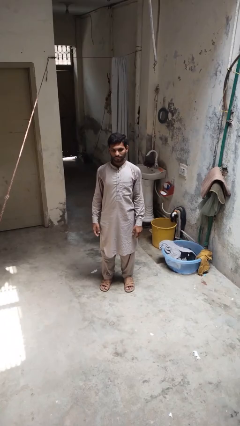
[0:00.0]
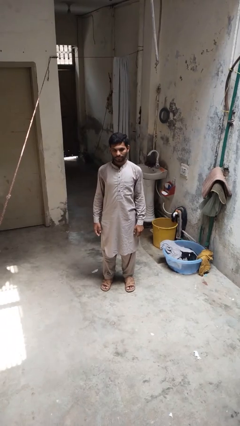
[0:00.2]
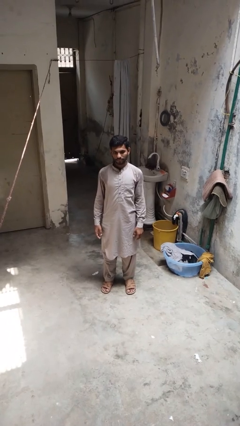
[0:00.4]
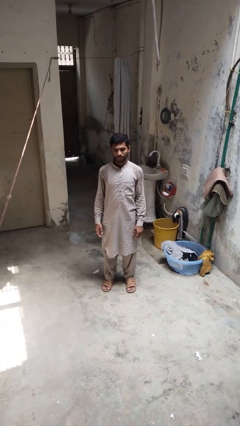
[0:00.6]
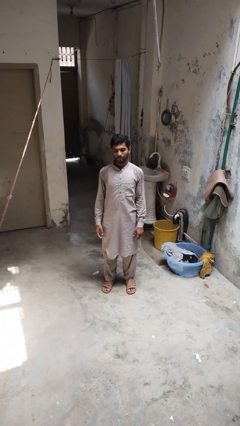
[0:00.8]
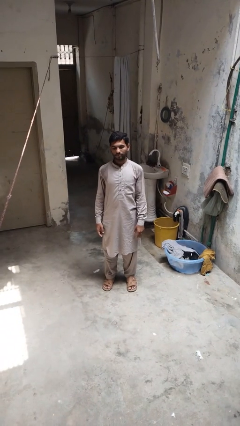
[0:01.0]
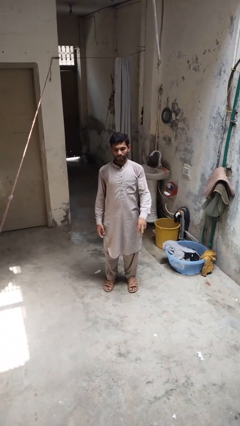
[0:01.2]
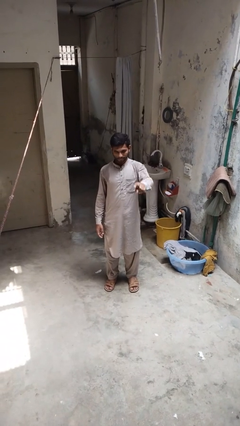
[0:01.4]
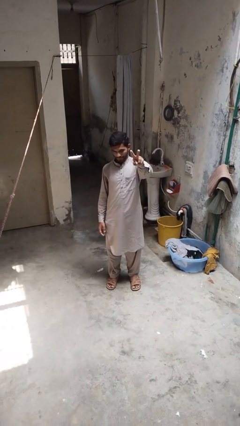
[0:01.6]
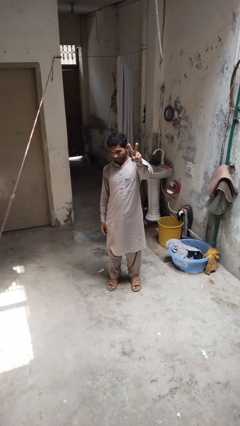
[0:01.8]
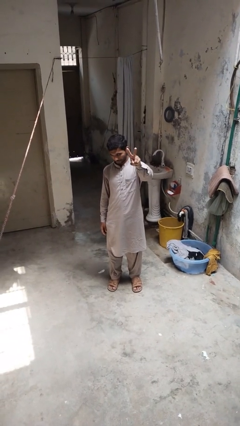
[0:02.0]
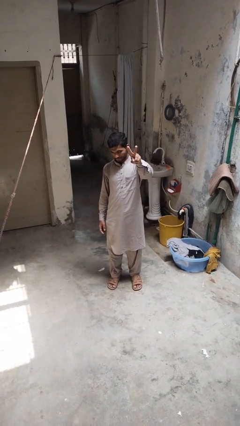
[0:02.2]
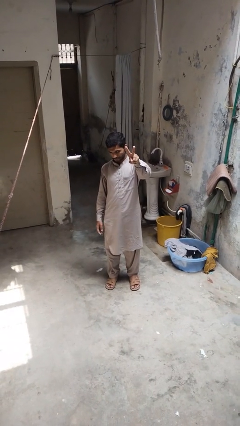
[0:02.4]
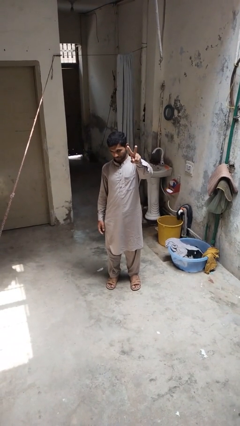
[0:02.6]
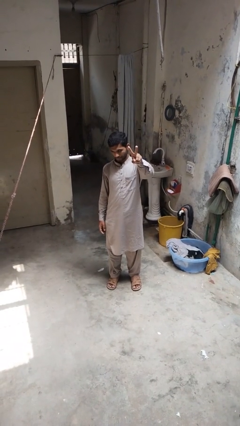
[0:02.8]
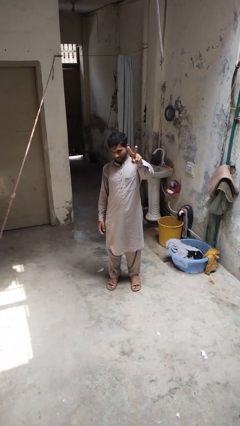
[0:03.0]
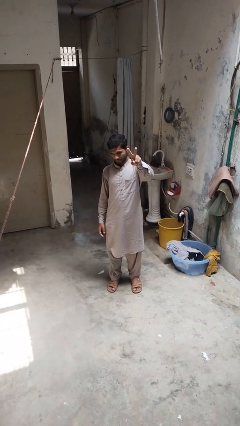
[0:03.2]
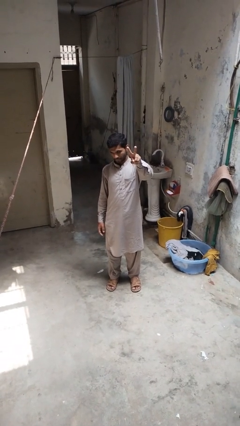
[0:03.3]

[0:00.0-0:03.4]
person gestures peace

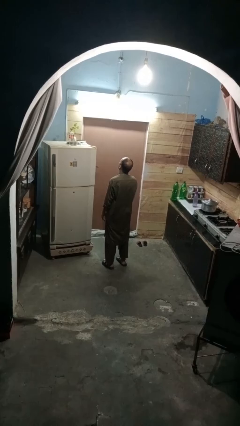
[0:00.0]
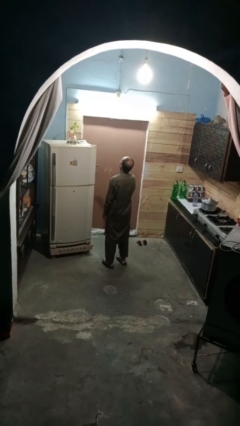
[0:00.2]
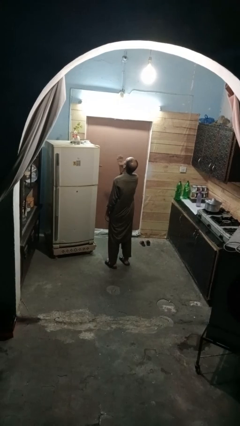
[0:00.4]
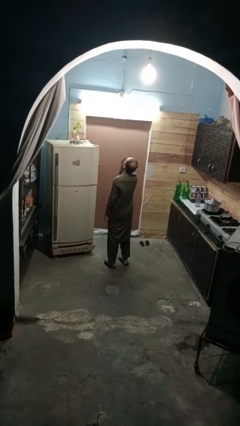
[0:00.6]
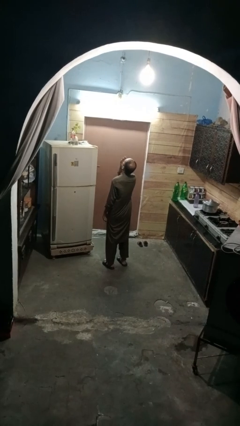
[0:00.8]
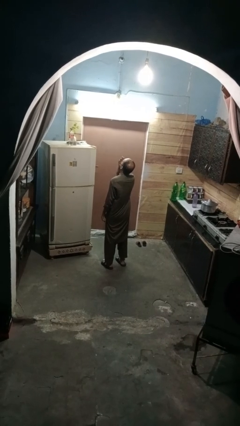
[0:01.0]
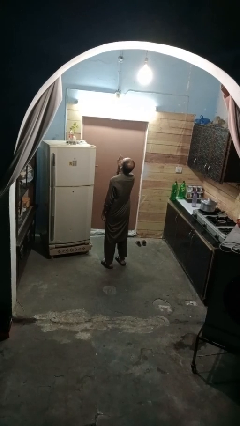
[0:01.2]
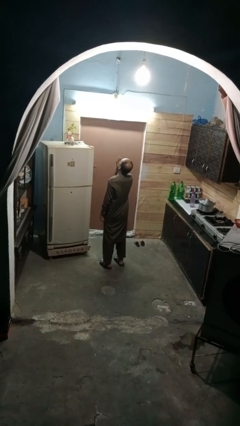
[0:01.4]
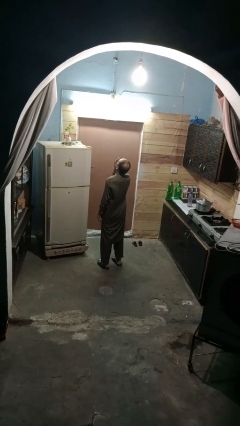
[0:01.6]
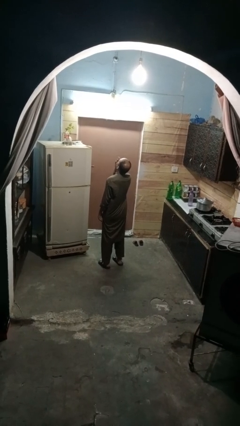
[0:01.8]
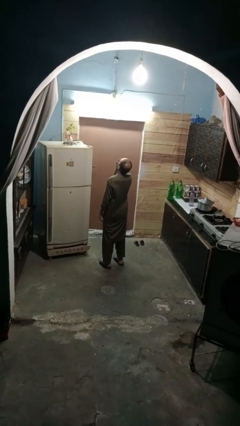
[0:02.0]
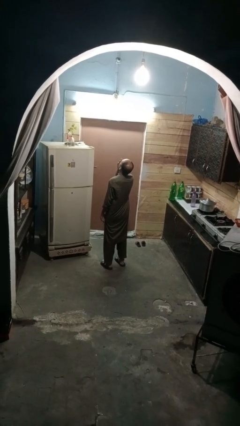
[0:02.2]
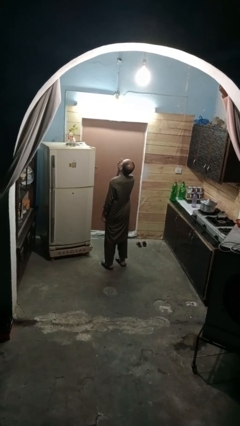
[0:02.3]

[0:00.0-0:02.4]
person yawns

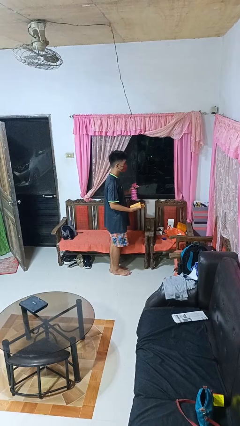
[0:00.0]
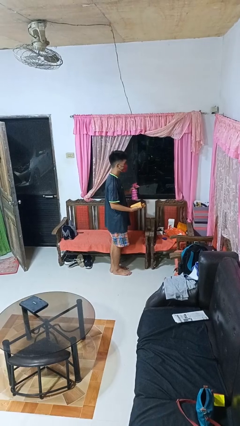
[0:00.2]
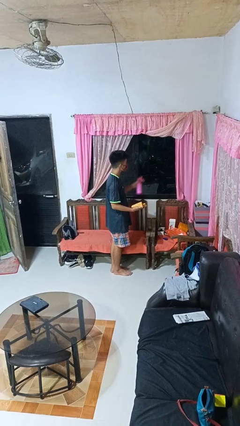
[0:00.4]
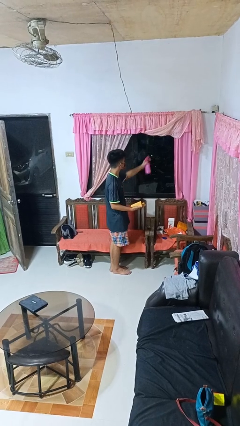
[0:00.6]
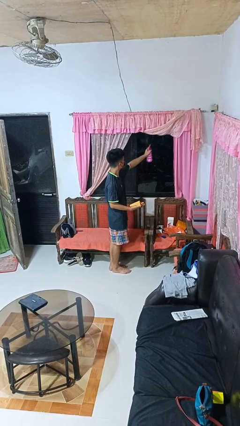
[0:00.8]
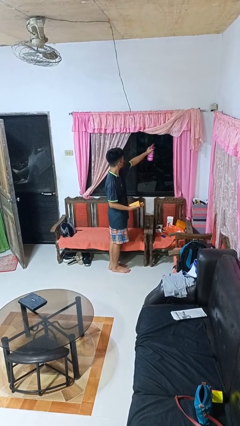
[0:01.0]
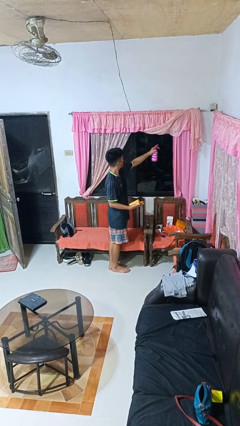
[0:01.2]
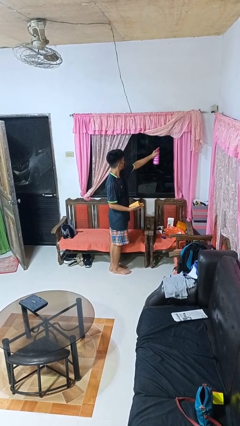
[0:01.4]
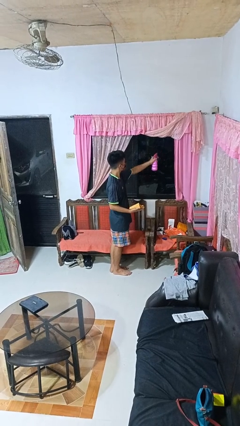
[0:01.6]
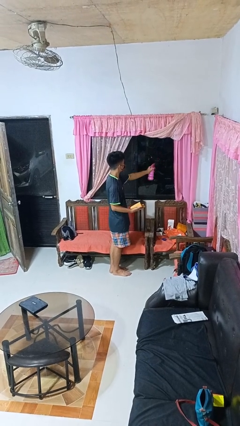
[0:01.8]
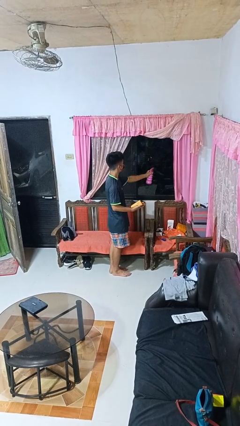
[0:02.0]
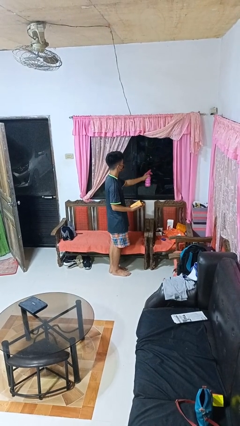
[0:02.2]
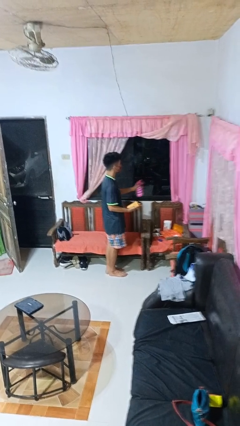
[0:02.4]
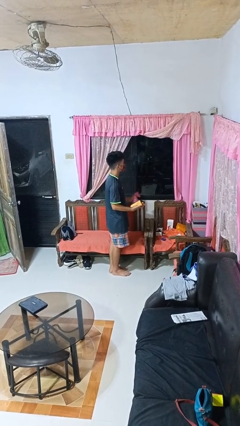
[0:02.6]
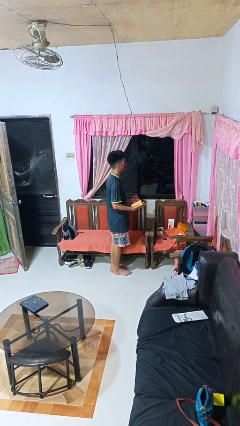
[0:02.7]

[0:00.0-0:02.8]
person sprays from bottle

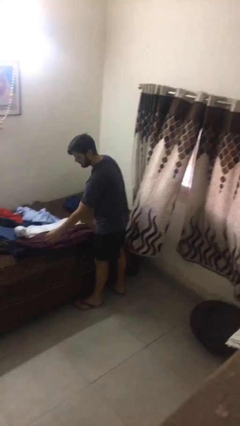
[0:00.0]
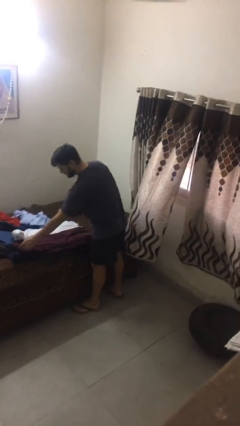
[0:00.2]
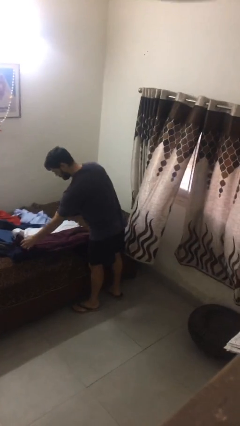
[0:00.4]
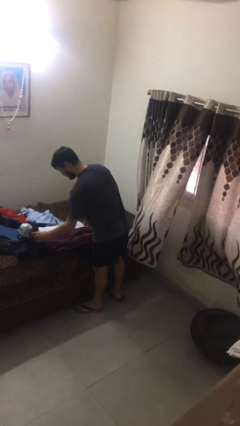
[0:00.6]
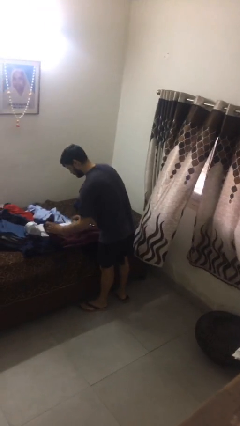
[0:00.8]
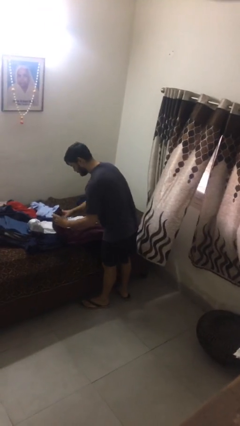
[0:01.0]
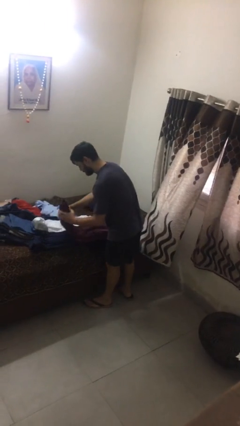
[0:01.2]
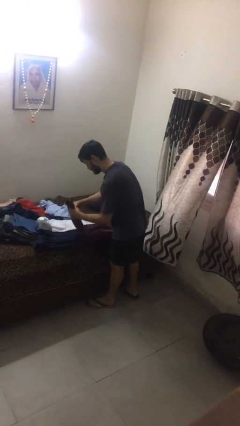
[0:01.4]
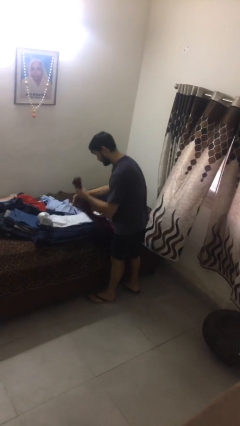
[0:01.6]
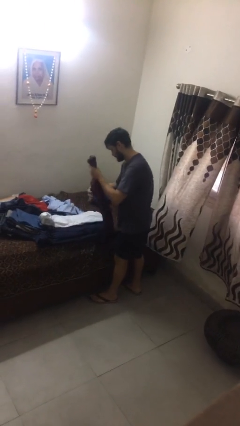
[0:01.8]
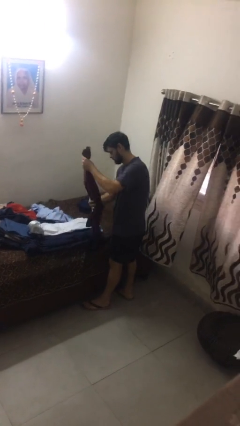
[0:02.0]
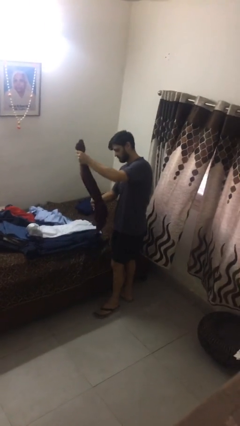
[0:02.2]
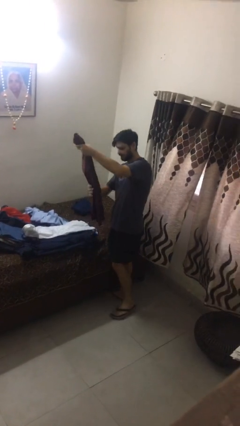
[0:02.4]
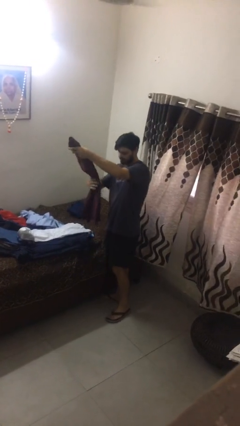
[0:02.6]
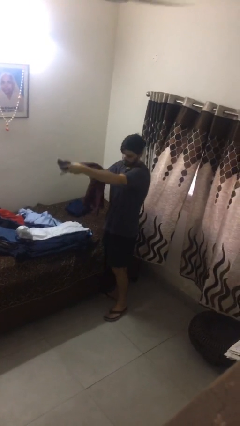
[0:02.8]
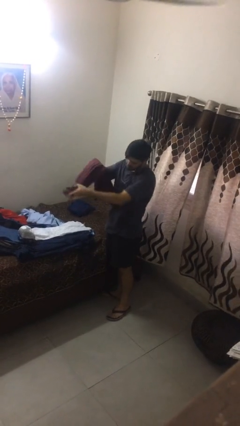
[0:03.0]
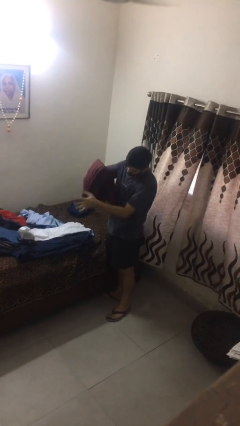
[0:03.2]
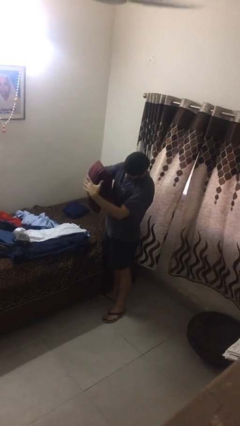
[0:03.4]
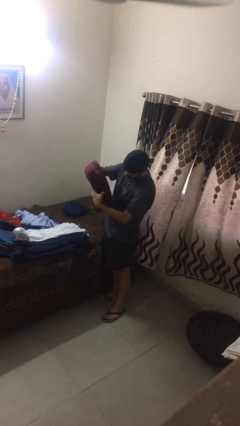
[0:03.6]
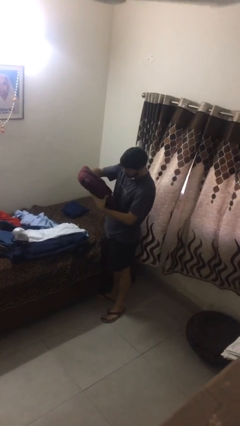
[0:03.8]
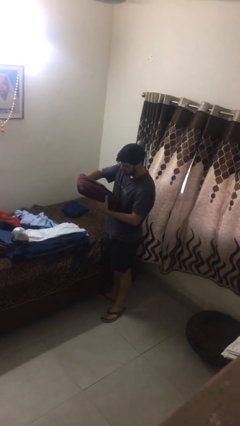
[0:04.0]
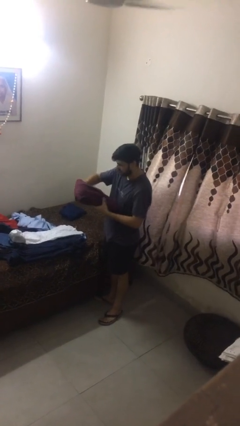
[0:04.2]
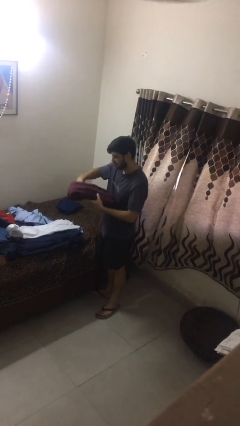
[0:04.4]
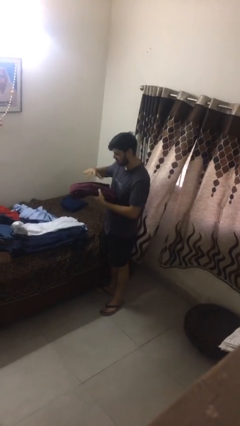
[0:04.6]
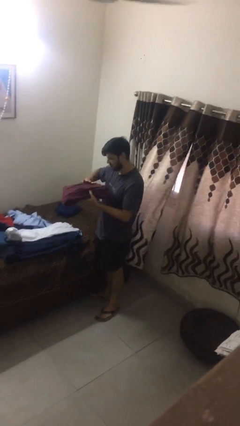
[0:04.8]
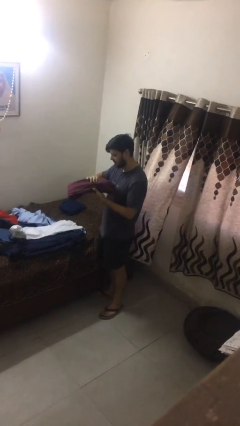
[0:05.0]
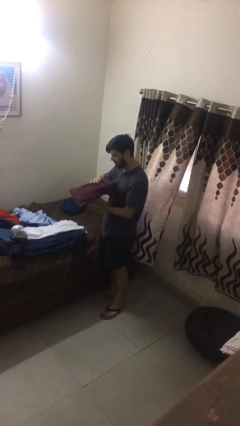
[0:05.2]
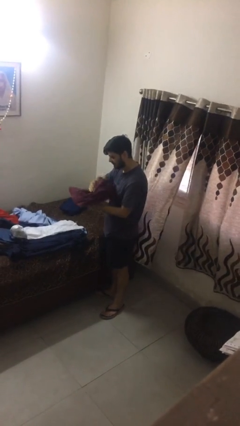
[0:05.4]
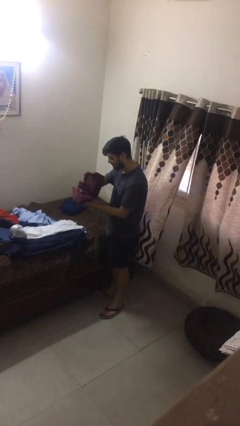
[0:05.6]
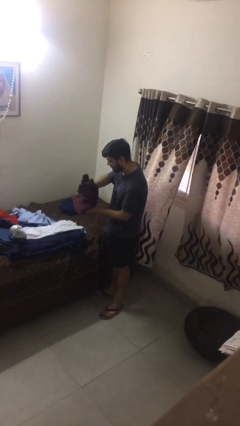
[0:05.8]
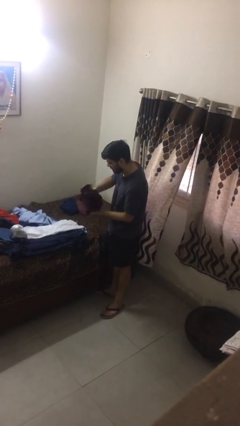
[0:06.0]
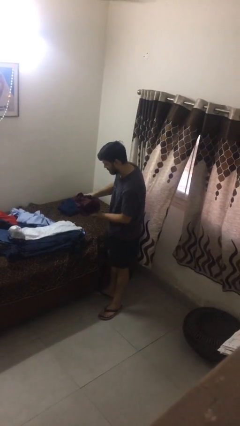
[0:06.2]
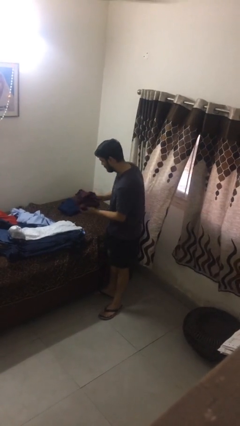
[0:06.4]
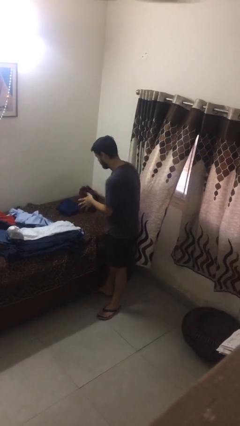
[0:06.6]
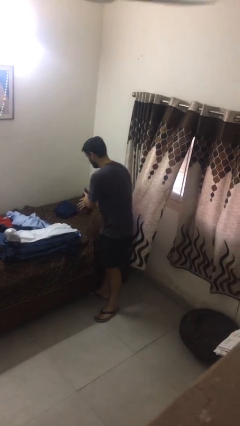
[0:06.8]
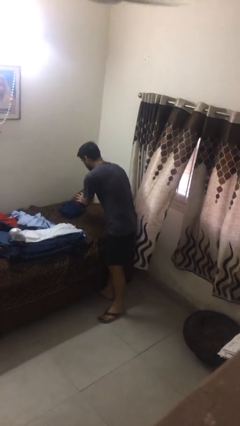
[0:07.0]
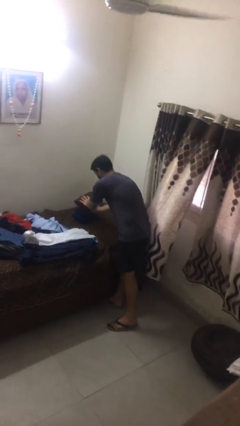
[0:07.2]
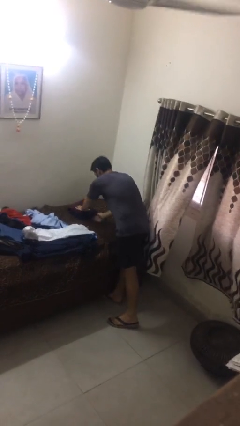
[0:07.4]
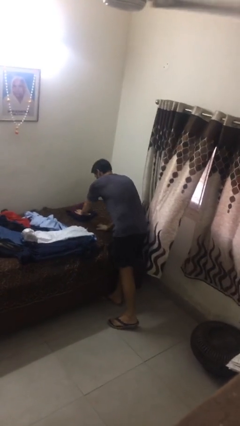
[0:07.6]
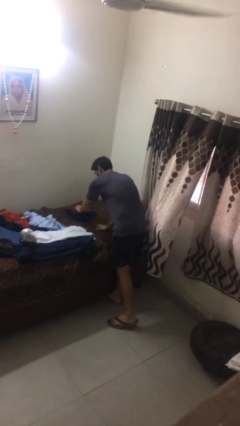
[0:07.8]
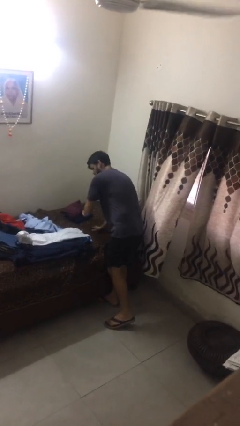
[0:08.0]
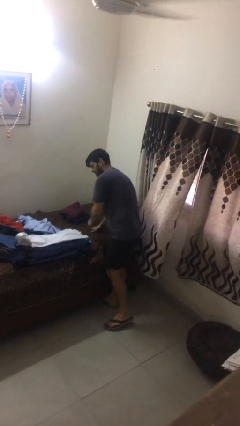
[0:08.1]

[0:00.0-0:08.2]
person folds shirt

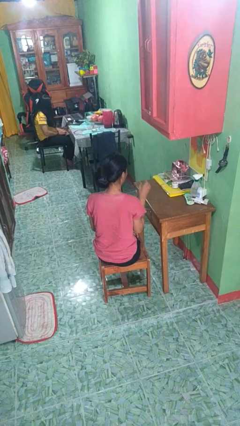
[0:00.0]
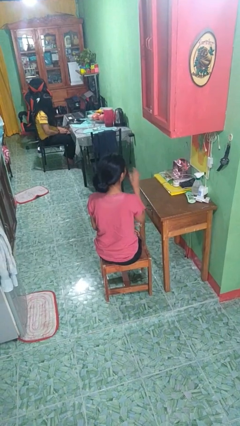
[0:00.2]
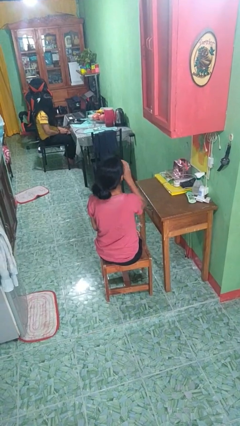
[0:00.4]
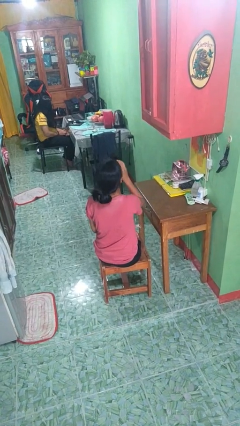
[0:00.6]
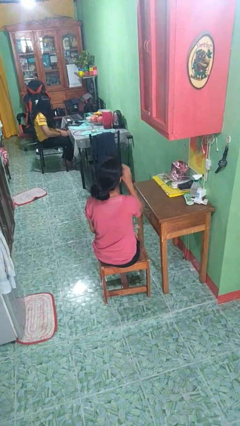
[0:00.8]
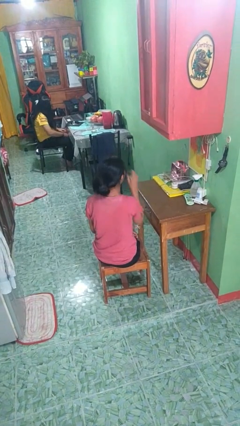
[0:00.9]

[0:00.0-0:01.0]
person drinks from shotglass
